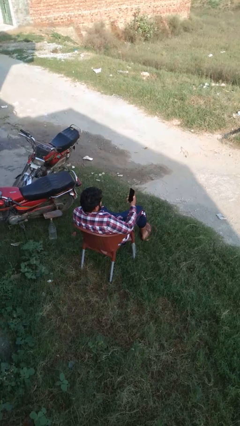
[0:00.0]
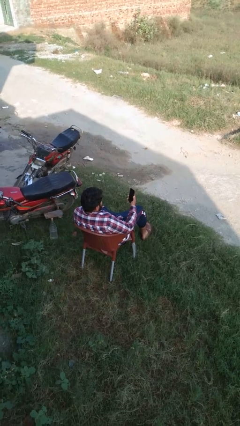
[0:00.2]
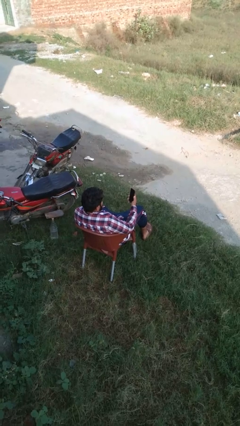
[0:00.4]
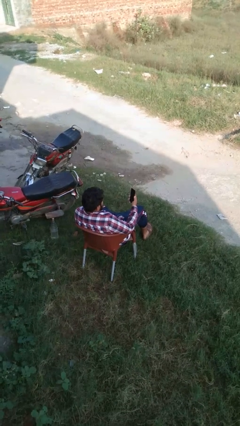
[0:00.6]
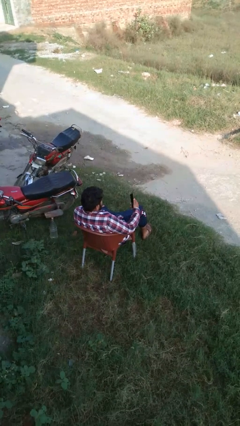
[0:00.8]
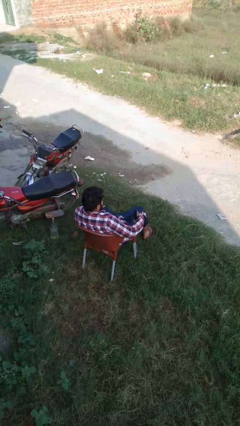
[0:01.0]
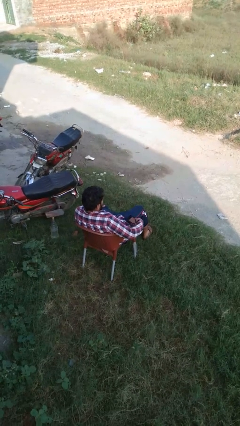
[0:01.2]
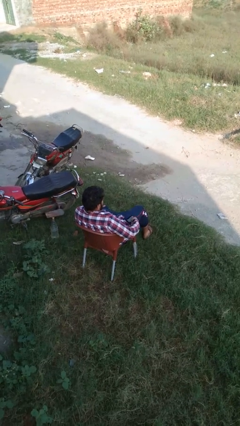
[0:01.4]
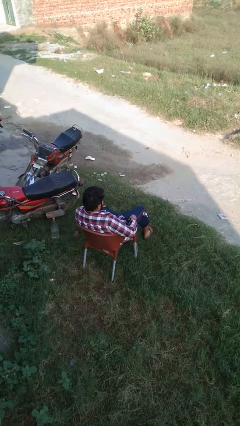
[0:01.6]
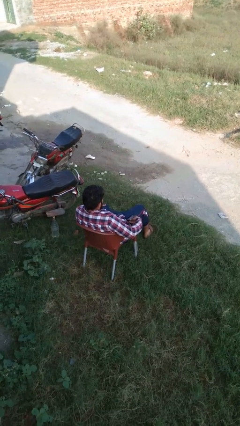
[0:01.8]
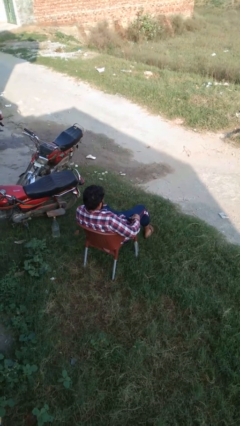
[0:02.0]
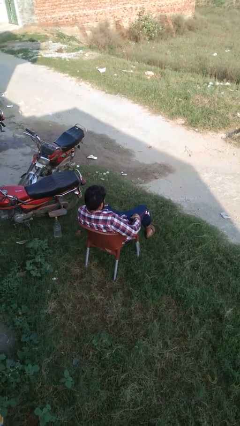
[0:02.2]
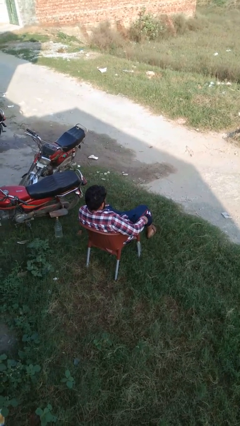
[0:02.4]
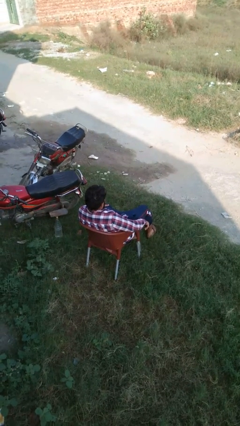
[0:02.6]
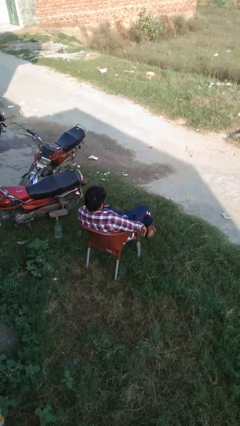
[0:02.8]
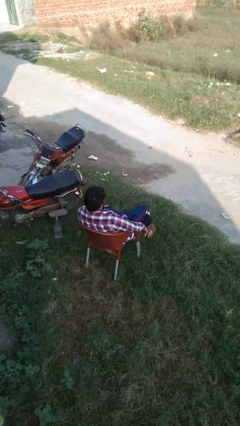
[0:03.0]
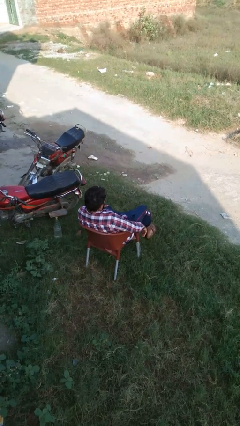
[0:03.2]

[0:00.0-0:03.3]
person puts phone into pocket

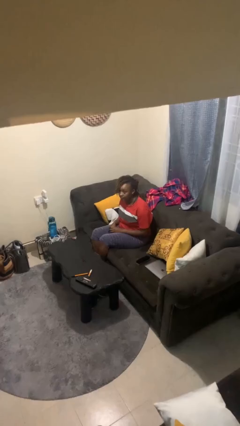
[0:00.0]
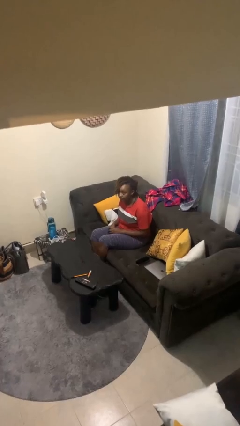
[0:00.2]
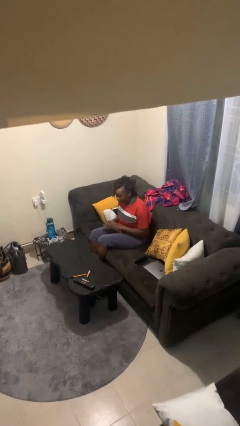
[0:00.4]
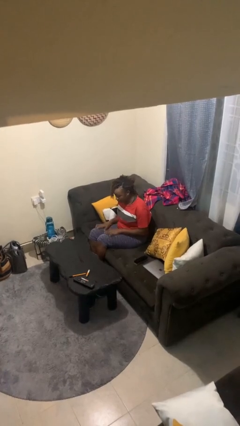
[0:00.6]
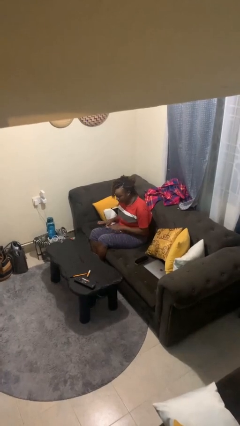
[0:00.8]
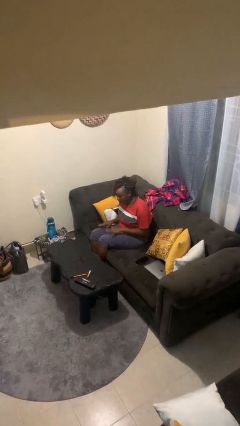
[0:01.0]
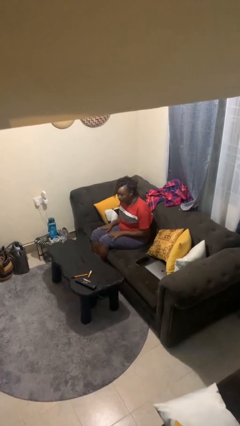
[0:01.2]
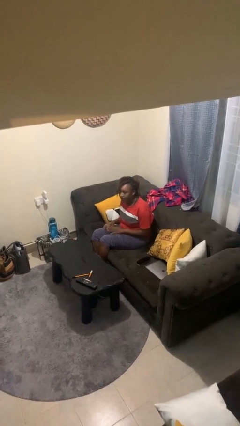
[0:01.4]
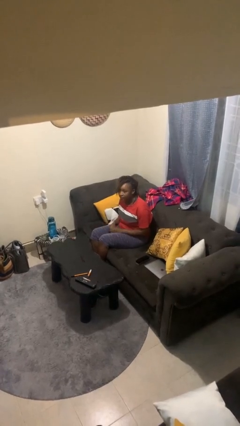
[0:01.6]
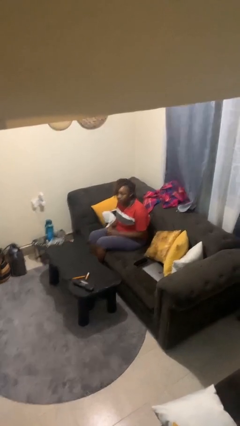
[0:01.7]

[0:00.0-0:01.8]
person slaps hands on thighs

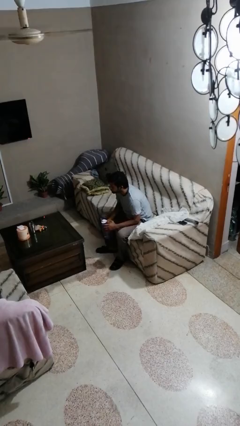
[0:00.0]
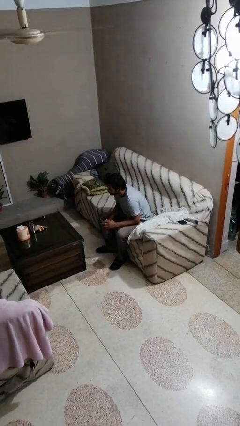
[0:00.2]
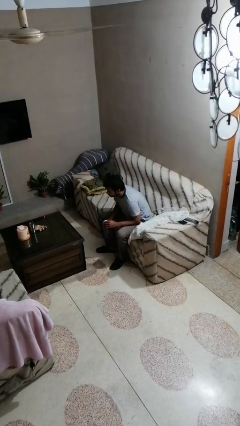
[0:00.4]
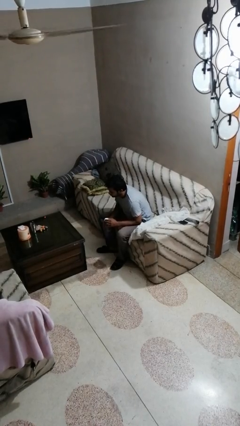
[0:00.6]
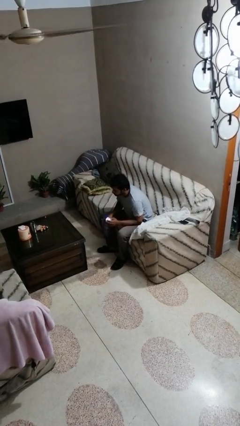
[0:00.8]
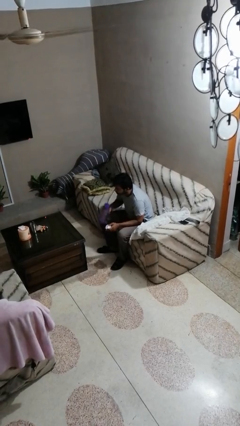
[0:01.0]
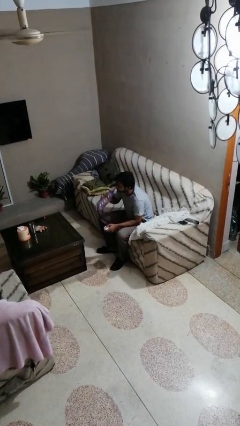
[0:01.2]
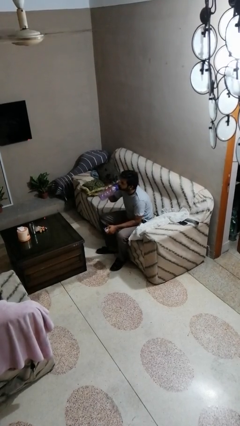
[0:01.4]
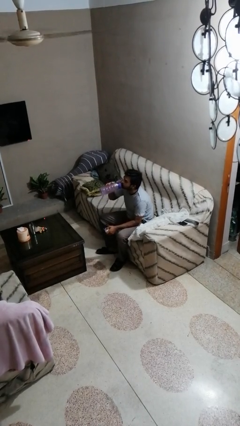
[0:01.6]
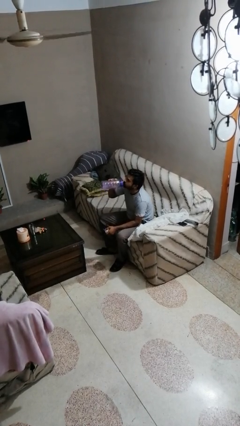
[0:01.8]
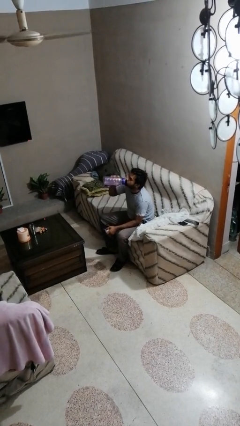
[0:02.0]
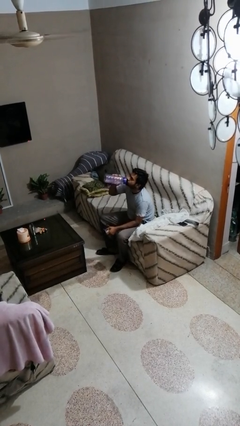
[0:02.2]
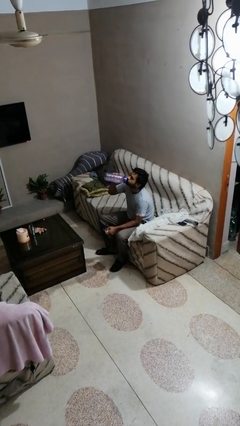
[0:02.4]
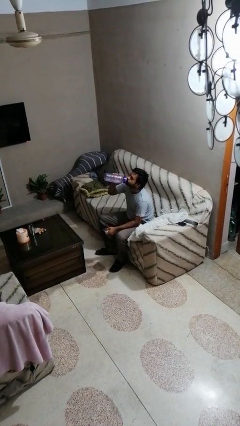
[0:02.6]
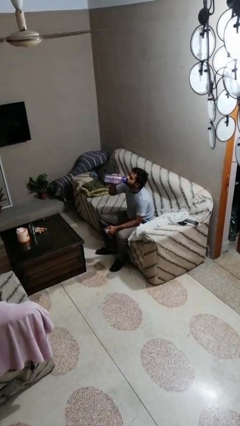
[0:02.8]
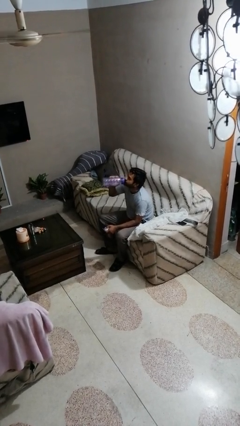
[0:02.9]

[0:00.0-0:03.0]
person drinks from bottle

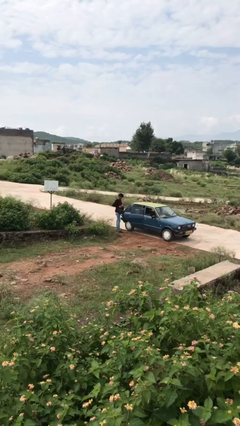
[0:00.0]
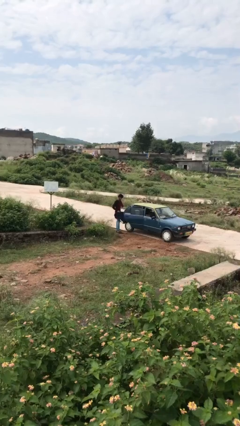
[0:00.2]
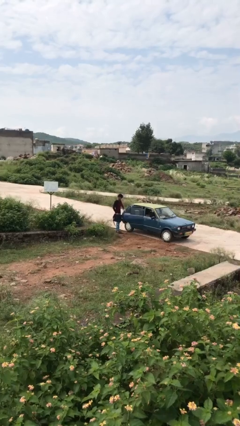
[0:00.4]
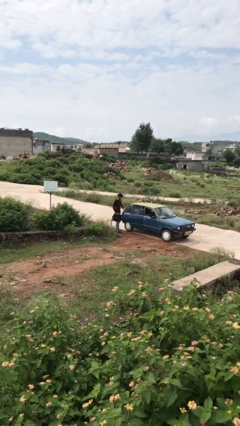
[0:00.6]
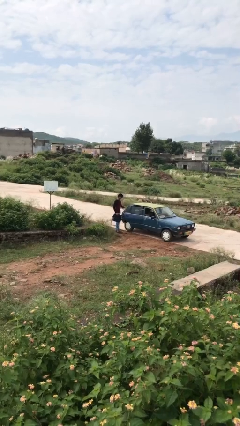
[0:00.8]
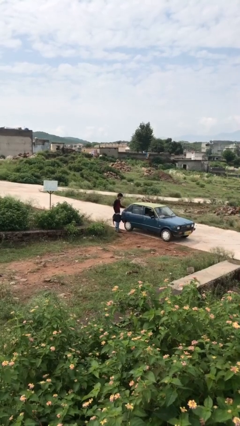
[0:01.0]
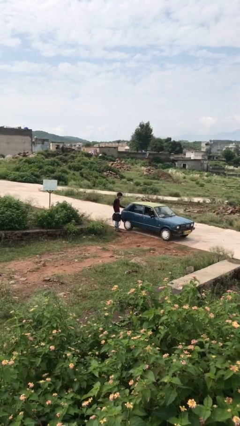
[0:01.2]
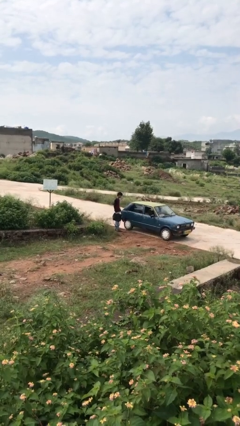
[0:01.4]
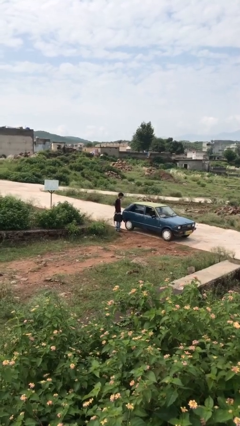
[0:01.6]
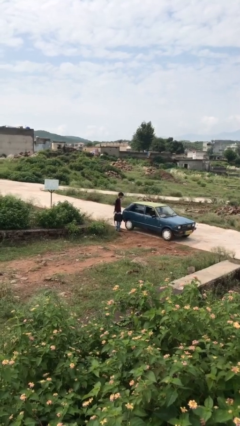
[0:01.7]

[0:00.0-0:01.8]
person closes car door

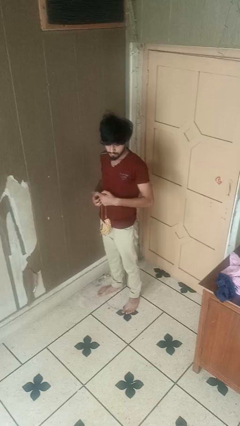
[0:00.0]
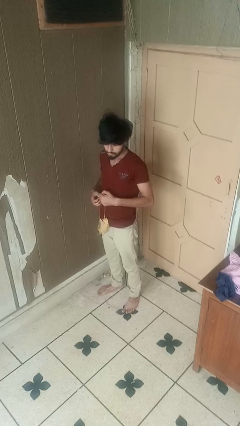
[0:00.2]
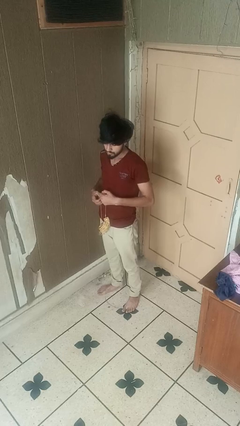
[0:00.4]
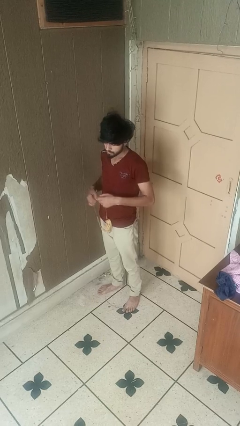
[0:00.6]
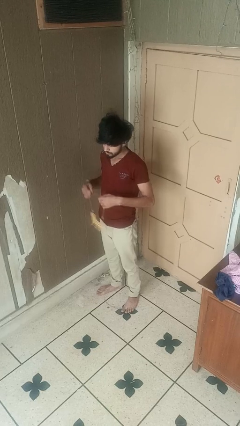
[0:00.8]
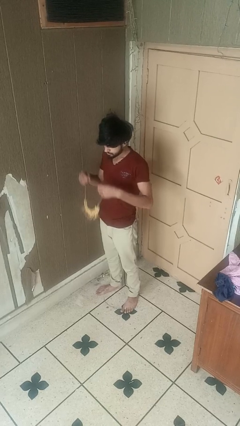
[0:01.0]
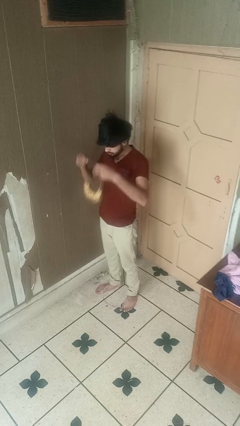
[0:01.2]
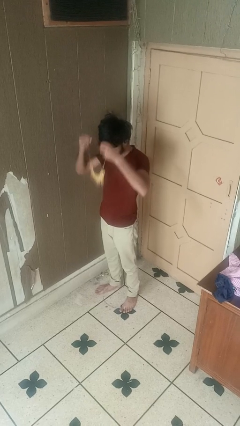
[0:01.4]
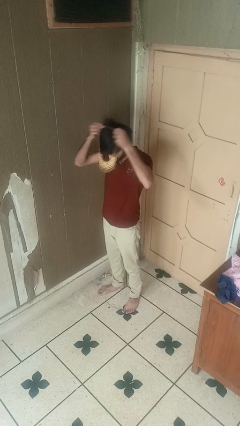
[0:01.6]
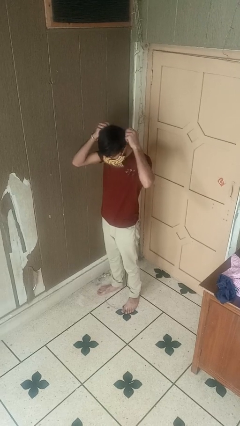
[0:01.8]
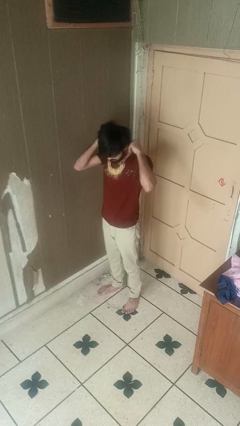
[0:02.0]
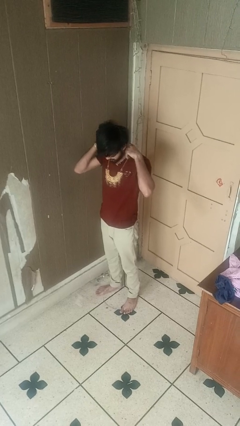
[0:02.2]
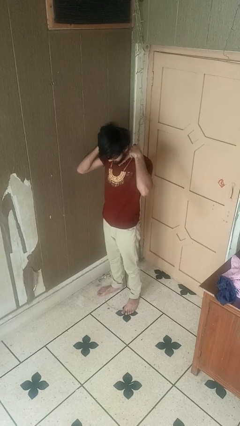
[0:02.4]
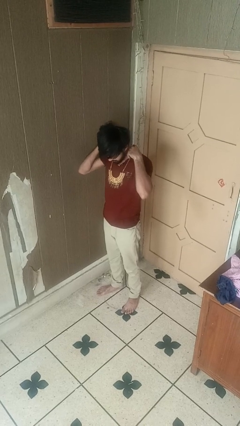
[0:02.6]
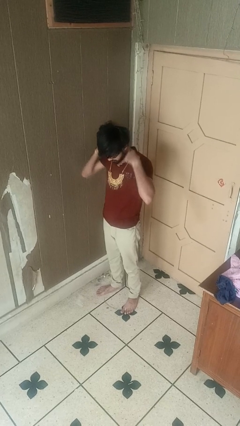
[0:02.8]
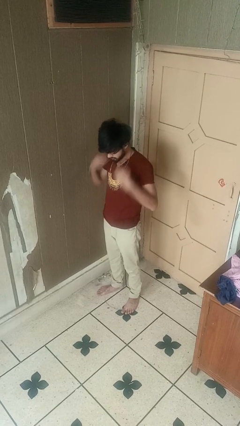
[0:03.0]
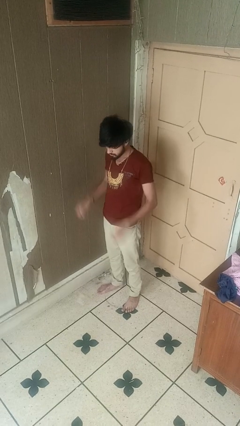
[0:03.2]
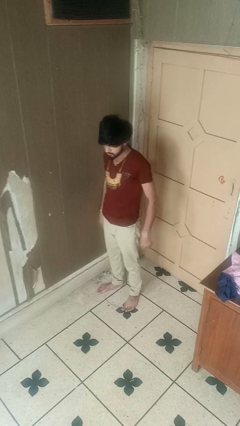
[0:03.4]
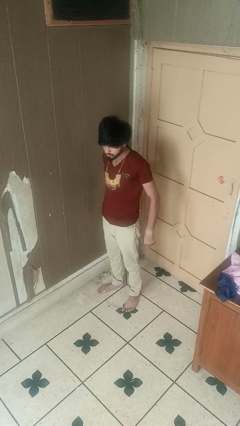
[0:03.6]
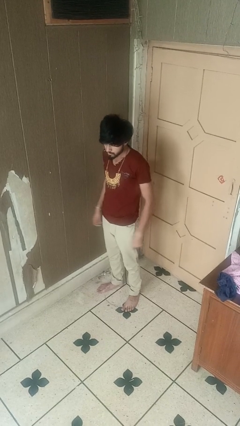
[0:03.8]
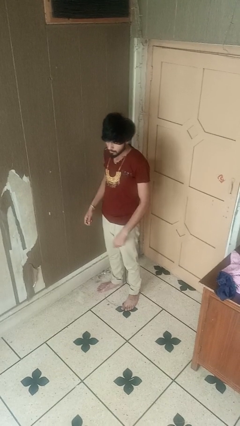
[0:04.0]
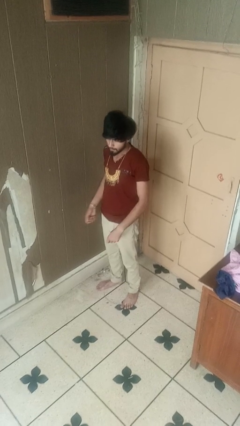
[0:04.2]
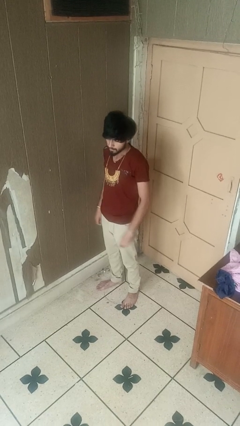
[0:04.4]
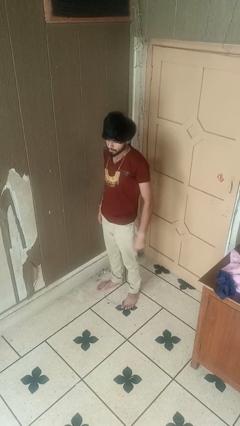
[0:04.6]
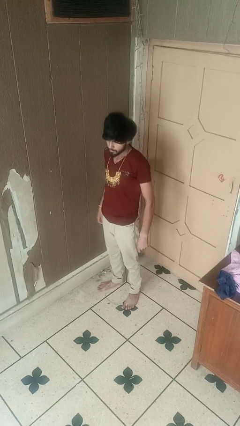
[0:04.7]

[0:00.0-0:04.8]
person puts on necklace

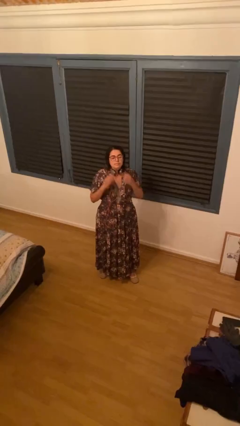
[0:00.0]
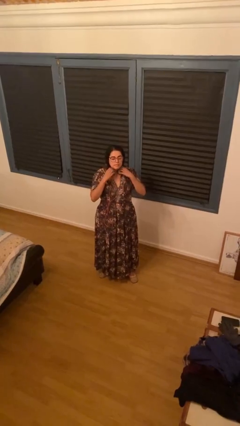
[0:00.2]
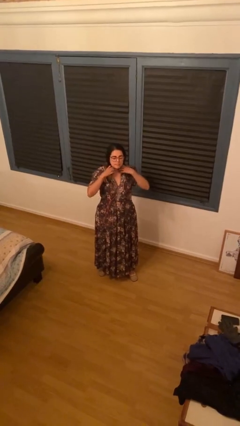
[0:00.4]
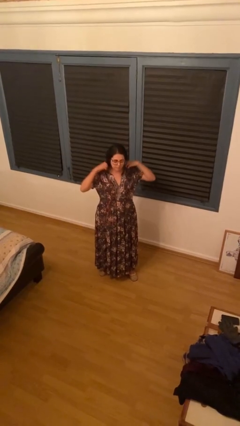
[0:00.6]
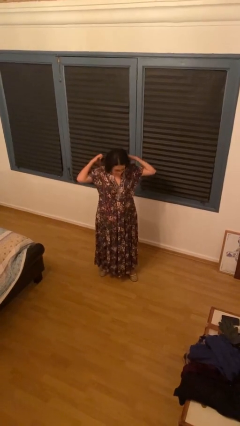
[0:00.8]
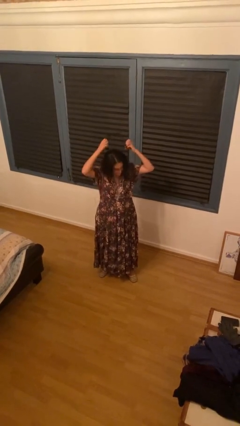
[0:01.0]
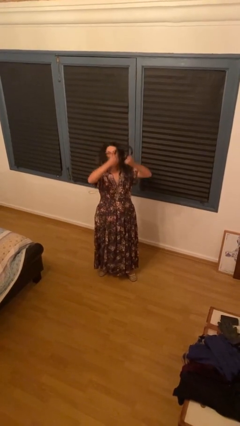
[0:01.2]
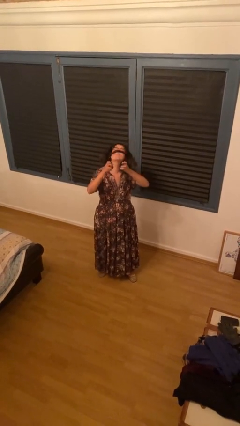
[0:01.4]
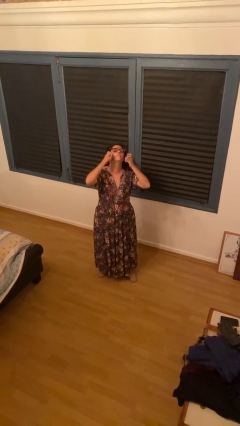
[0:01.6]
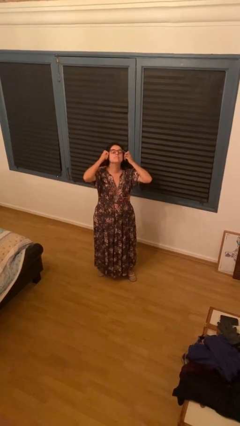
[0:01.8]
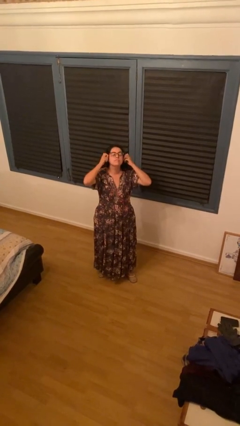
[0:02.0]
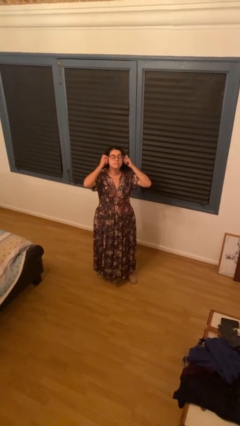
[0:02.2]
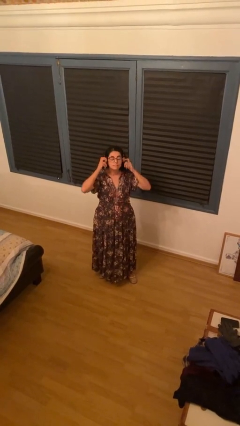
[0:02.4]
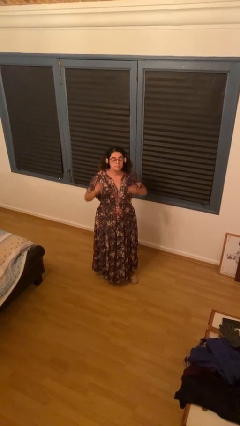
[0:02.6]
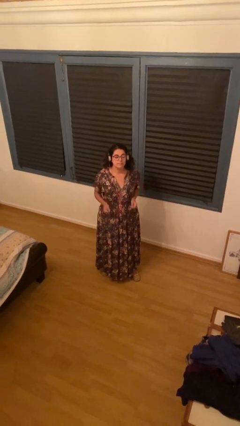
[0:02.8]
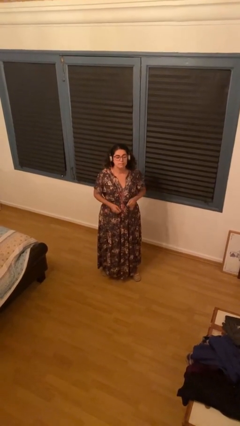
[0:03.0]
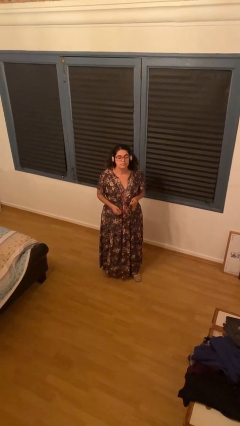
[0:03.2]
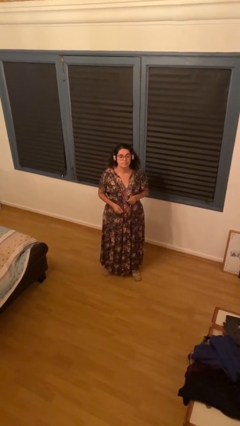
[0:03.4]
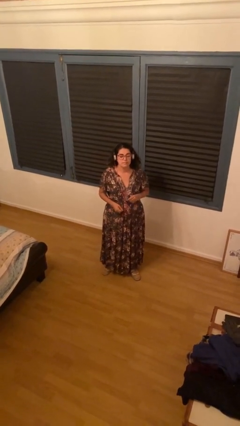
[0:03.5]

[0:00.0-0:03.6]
person puts on headphones
